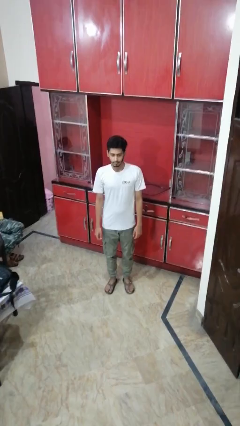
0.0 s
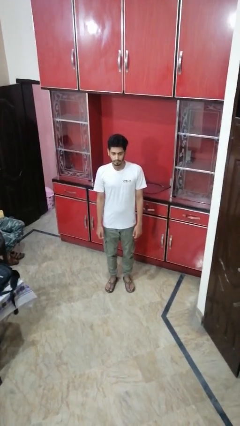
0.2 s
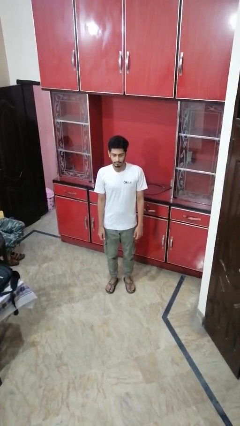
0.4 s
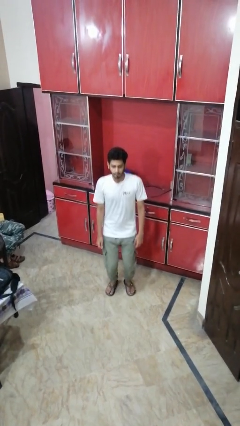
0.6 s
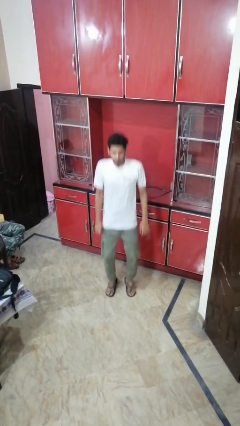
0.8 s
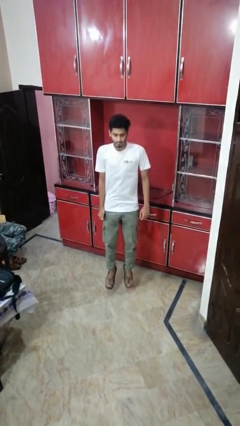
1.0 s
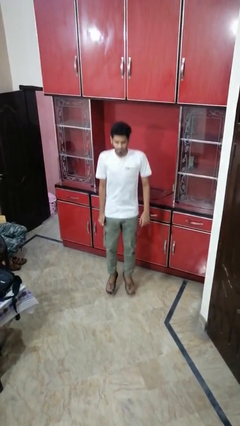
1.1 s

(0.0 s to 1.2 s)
person jumps

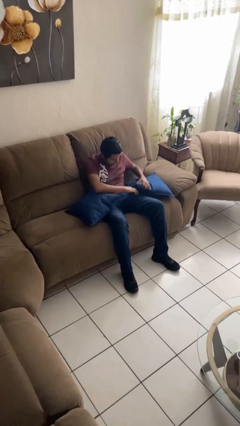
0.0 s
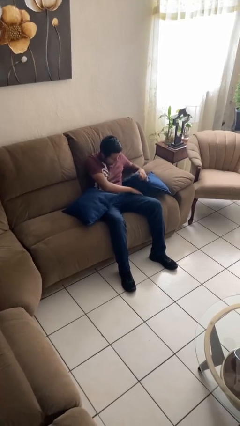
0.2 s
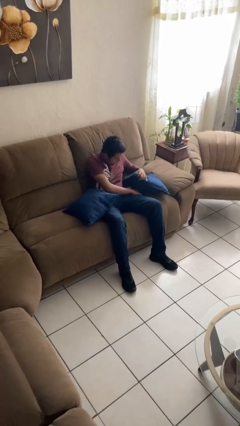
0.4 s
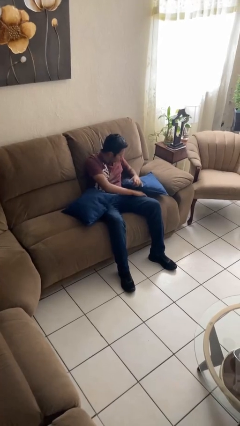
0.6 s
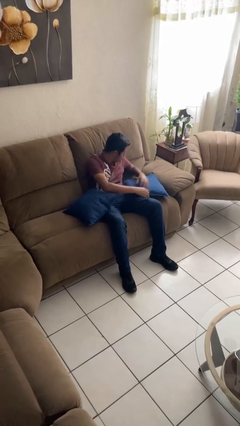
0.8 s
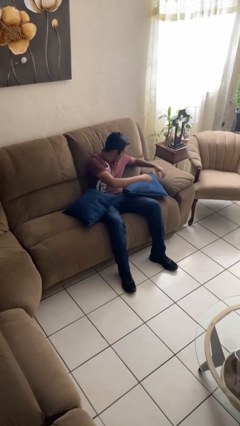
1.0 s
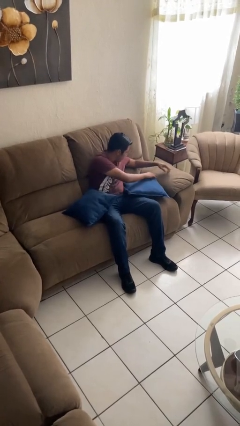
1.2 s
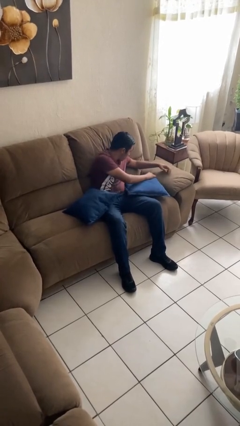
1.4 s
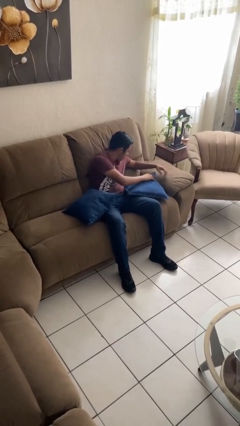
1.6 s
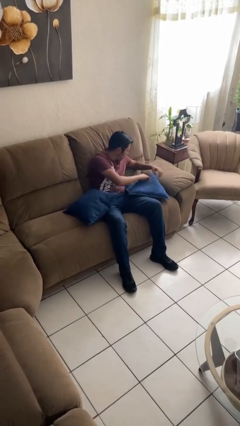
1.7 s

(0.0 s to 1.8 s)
person searches in couch

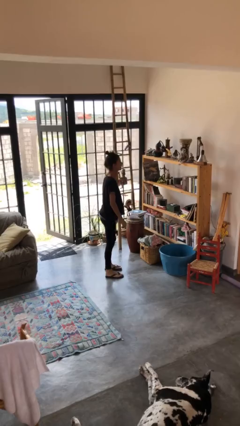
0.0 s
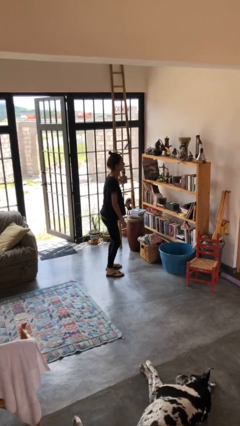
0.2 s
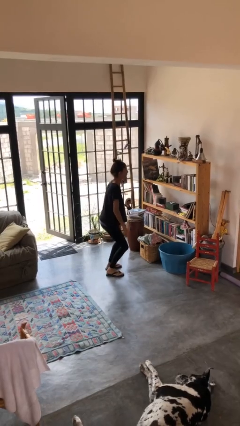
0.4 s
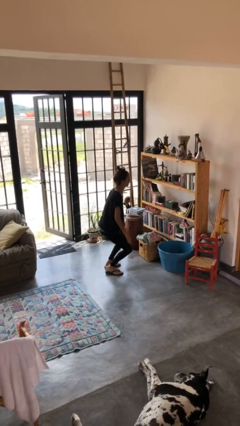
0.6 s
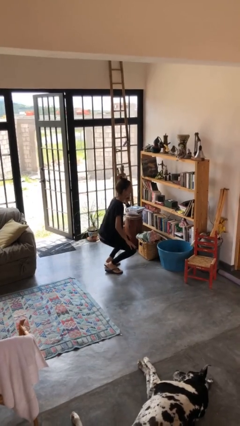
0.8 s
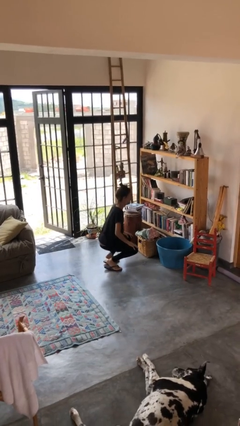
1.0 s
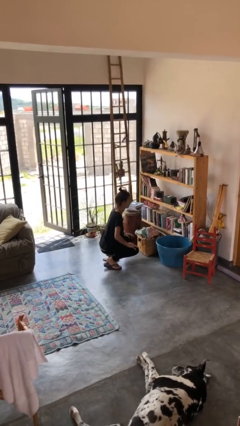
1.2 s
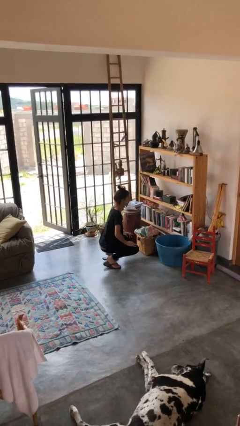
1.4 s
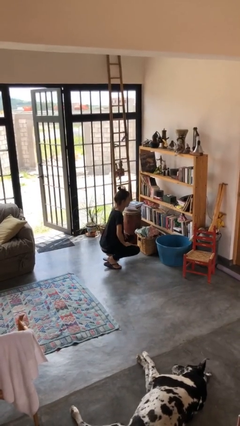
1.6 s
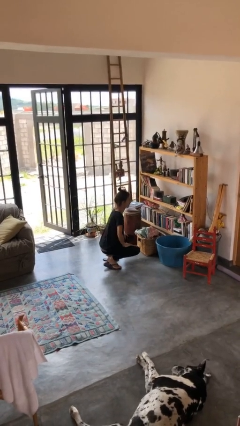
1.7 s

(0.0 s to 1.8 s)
person squats

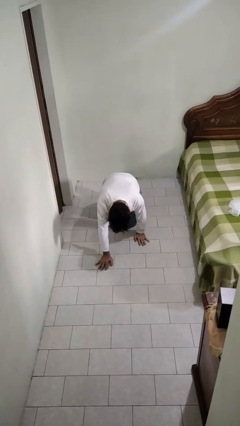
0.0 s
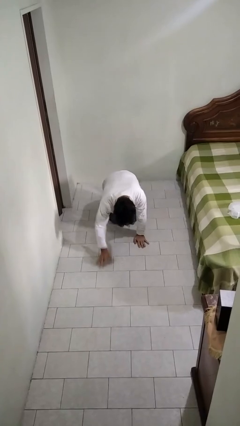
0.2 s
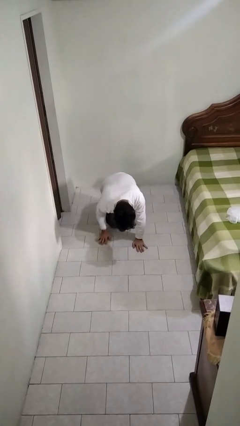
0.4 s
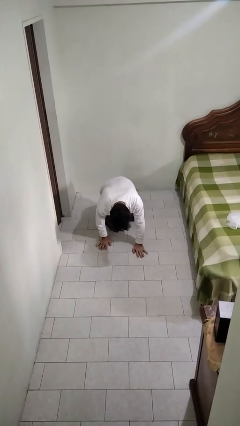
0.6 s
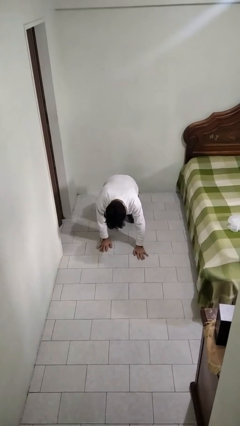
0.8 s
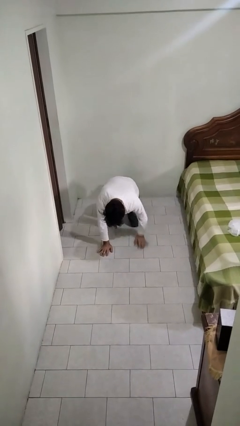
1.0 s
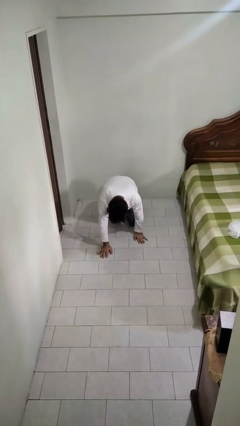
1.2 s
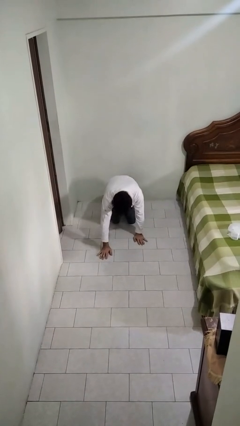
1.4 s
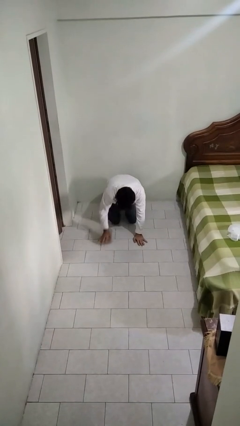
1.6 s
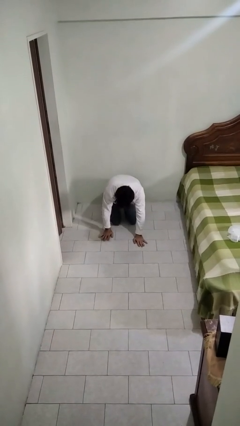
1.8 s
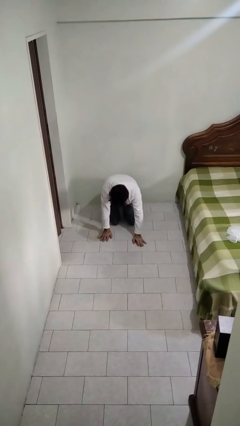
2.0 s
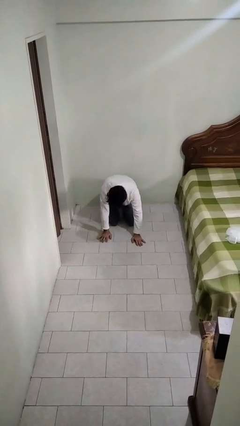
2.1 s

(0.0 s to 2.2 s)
person crawls

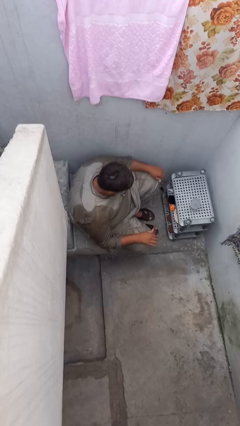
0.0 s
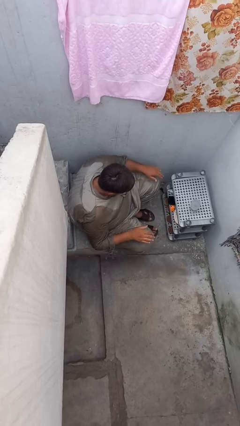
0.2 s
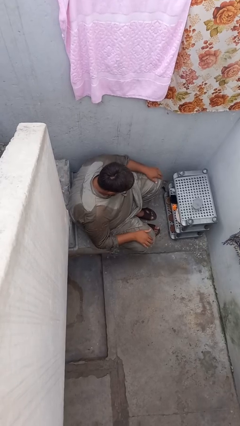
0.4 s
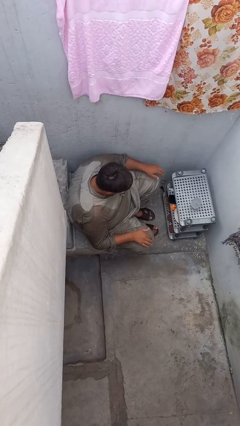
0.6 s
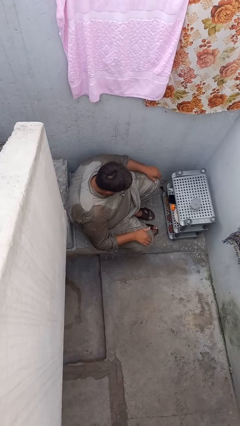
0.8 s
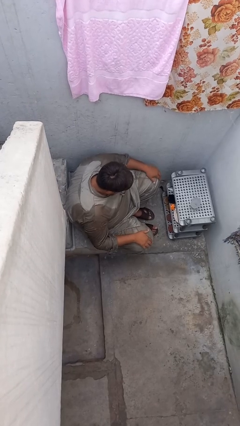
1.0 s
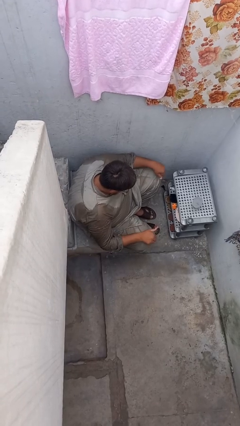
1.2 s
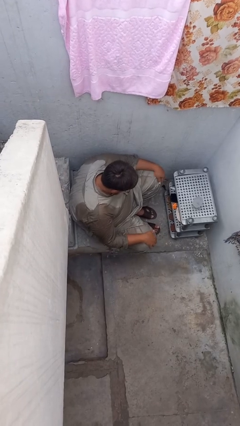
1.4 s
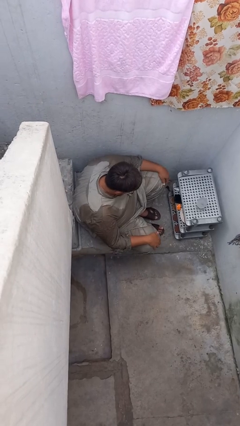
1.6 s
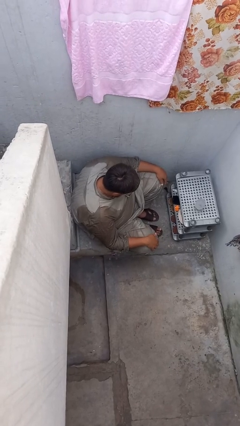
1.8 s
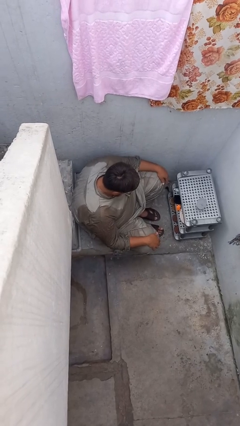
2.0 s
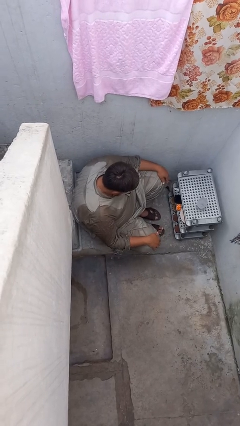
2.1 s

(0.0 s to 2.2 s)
person slaps hands on thighs

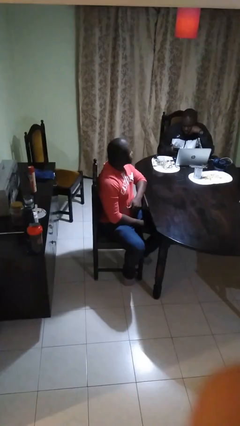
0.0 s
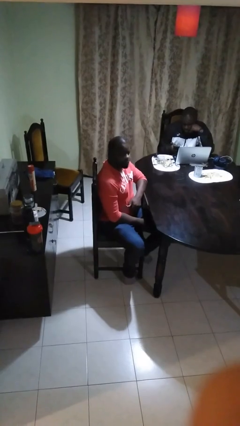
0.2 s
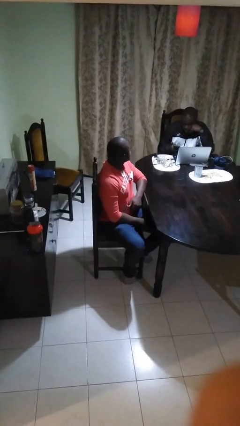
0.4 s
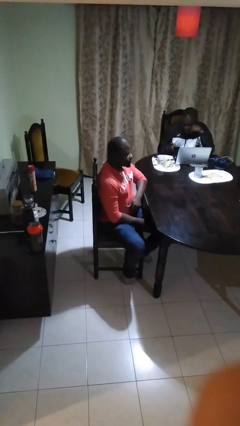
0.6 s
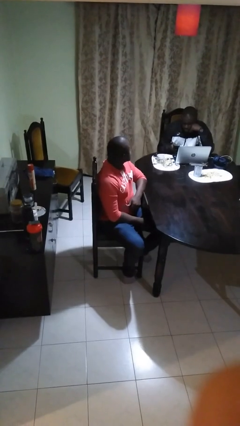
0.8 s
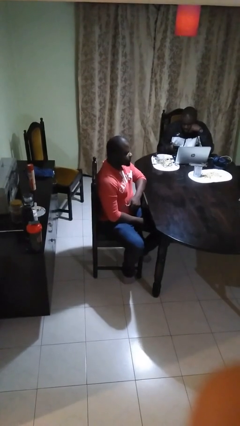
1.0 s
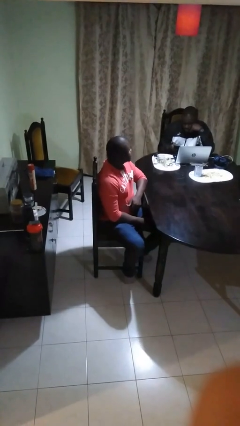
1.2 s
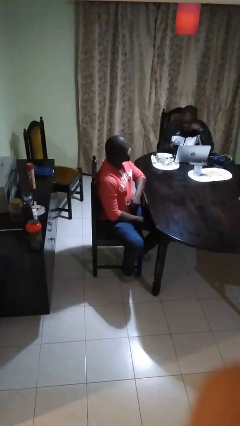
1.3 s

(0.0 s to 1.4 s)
person shakes head

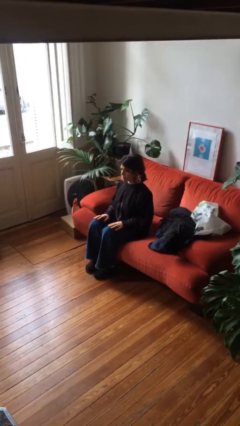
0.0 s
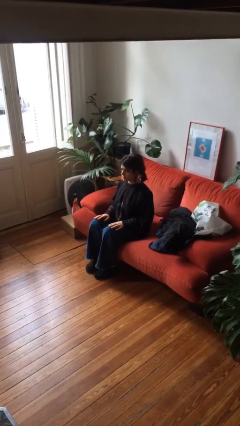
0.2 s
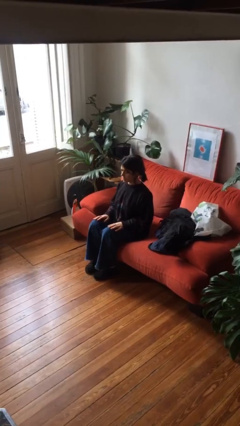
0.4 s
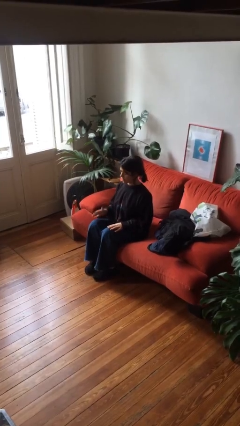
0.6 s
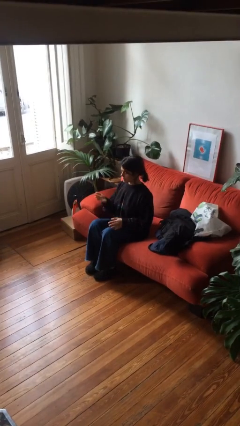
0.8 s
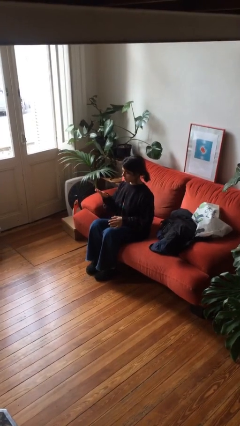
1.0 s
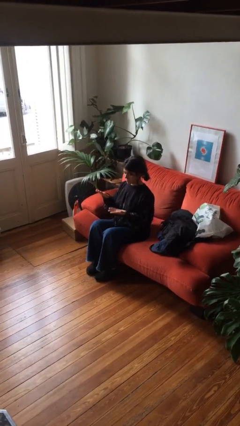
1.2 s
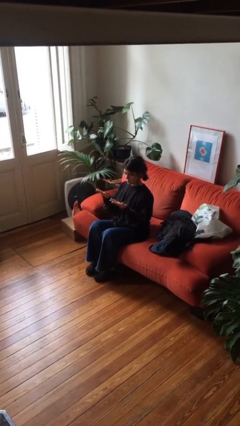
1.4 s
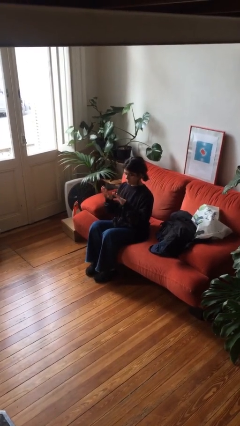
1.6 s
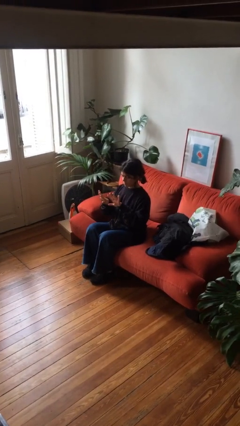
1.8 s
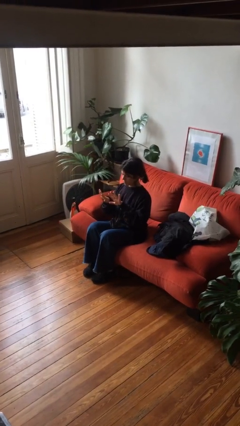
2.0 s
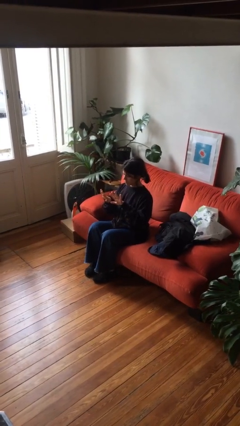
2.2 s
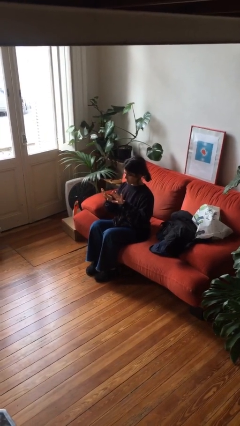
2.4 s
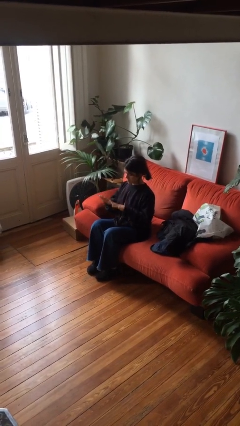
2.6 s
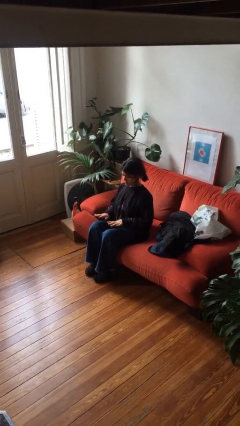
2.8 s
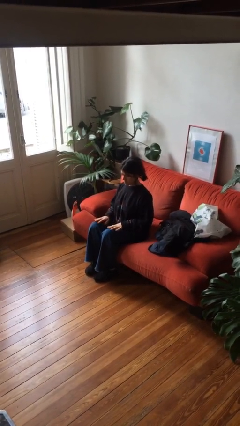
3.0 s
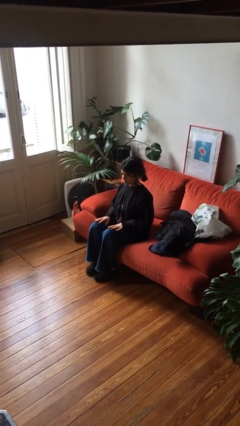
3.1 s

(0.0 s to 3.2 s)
person looks at hands in lap

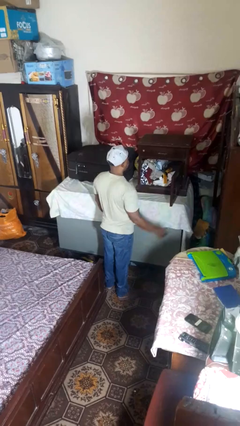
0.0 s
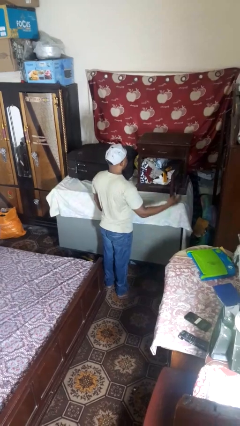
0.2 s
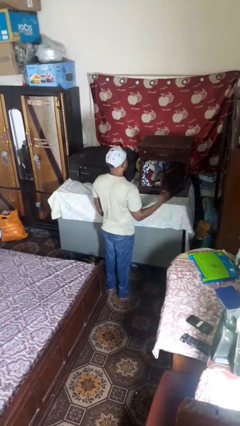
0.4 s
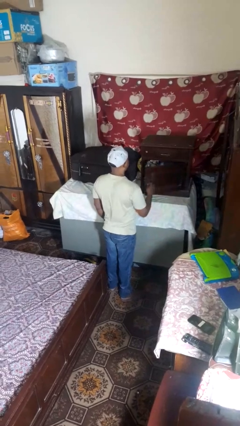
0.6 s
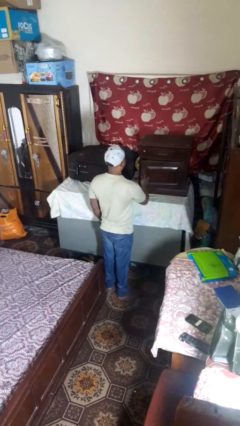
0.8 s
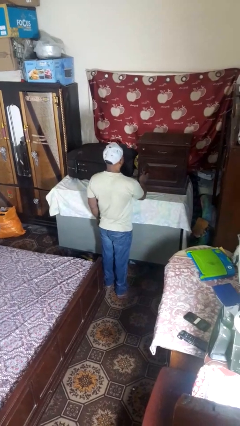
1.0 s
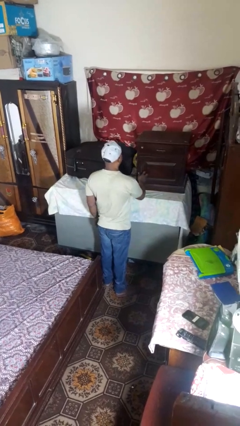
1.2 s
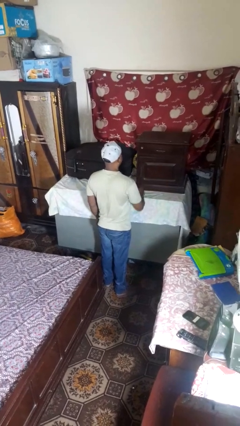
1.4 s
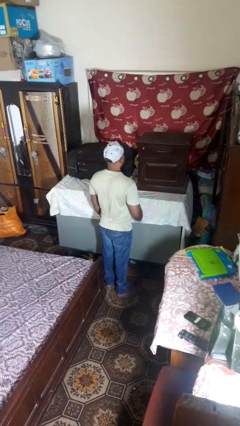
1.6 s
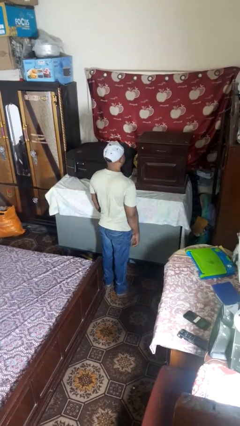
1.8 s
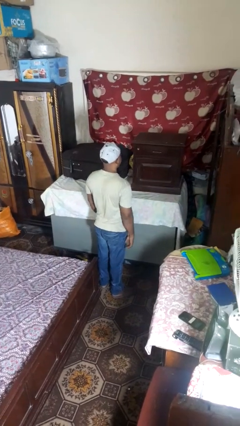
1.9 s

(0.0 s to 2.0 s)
person closes closet door

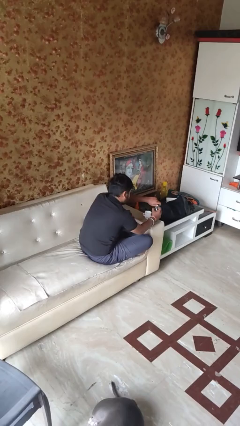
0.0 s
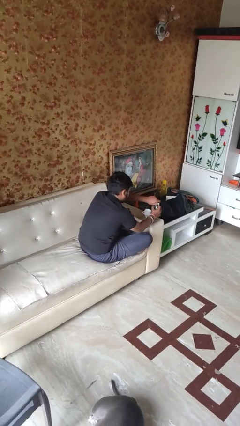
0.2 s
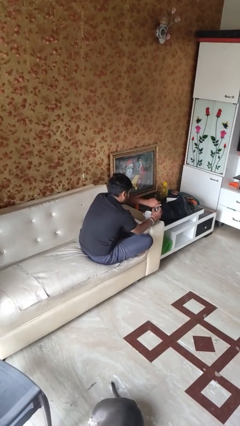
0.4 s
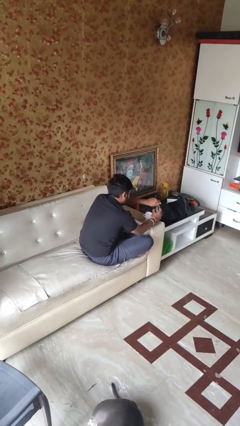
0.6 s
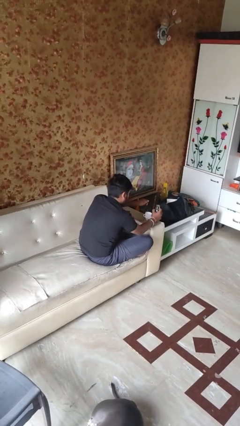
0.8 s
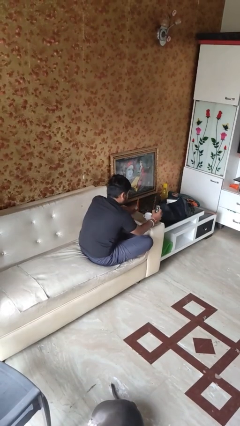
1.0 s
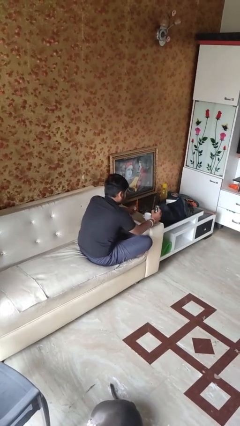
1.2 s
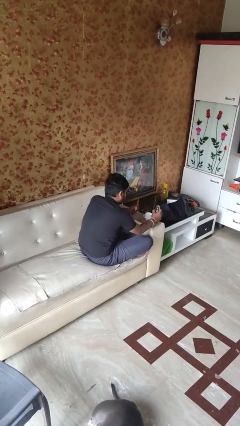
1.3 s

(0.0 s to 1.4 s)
person unscrews lid from bottle
